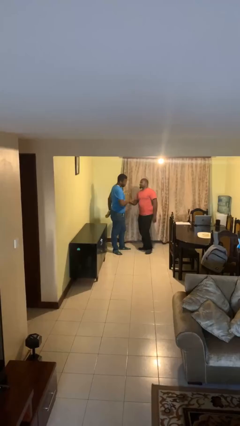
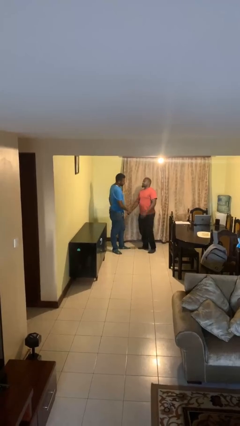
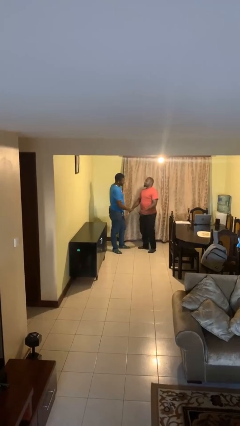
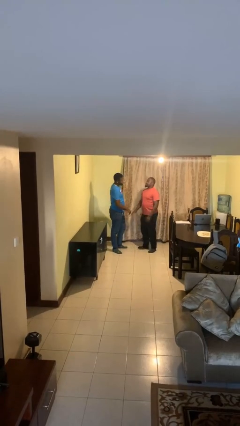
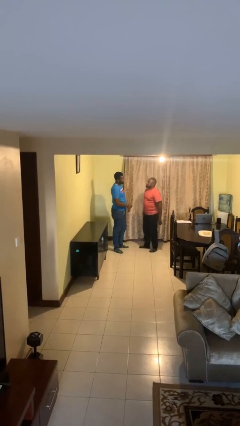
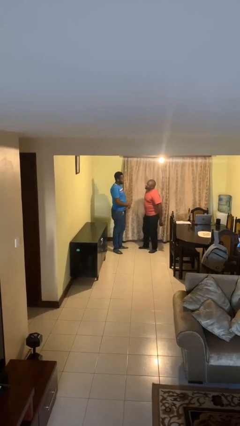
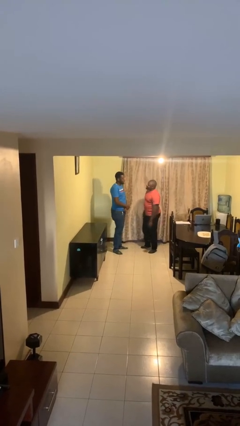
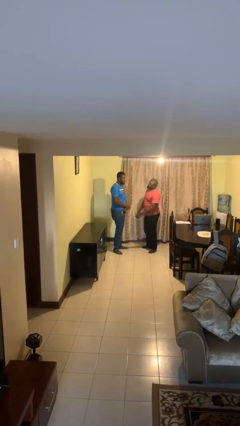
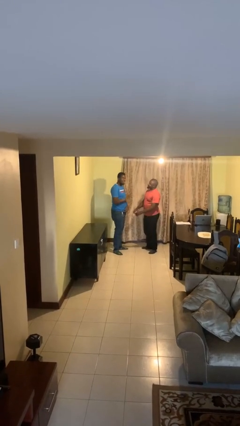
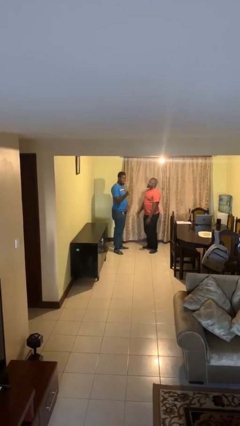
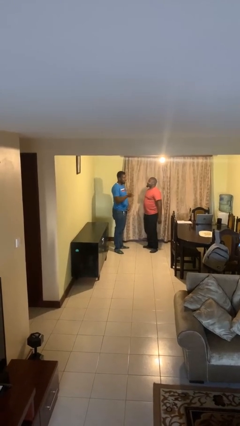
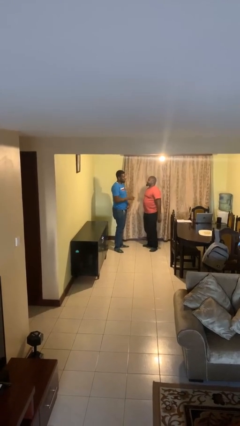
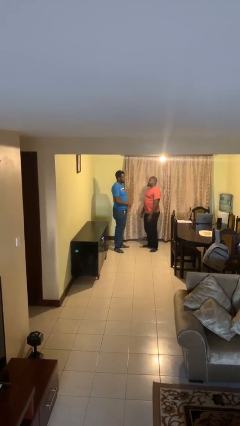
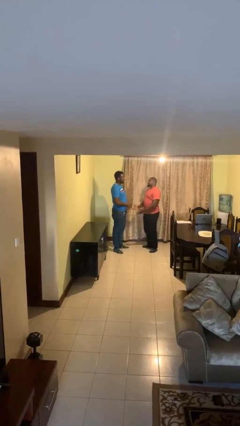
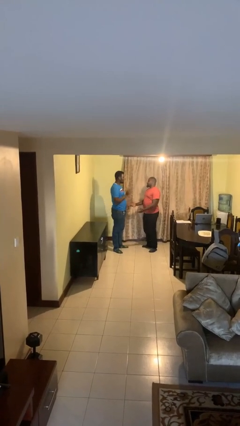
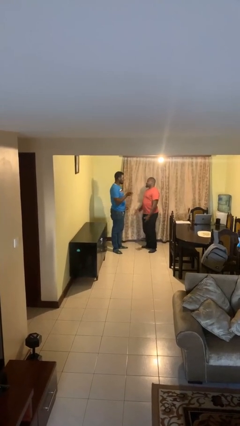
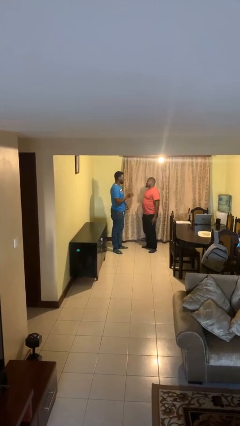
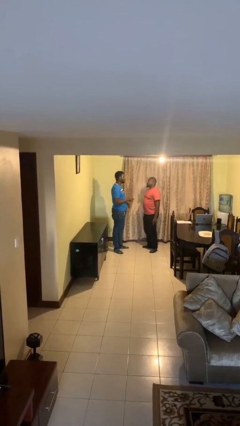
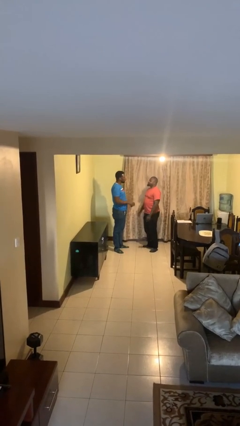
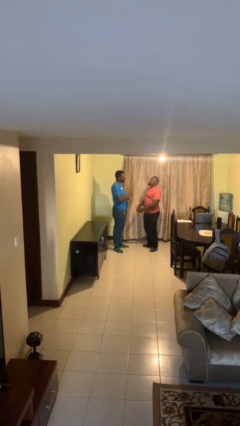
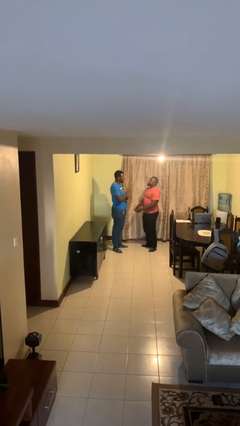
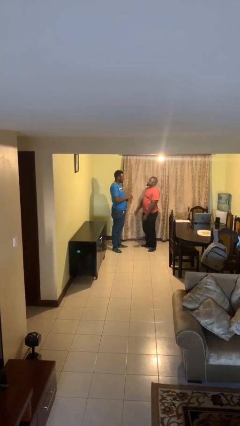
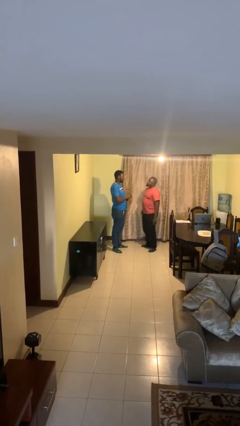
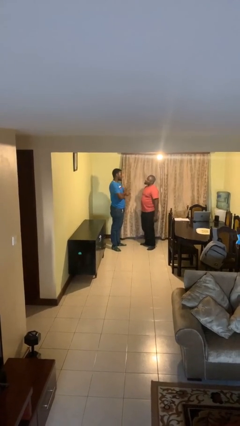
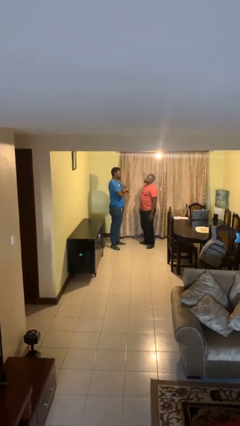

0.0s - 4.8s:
person talks to person

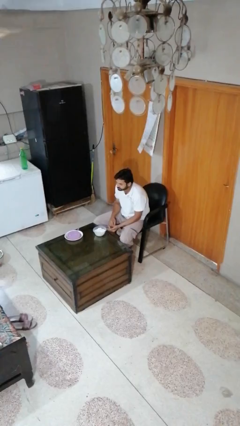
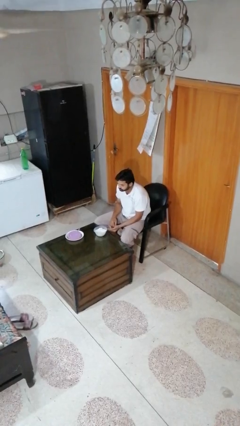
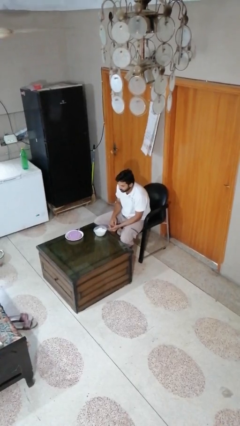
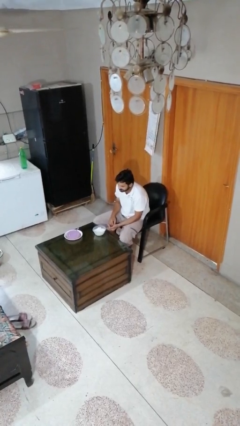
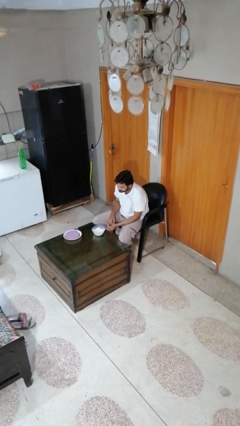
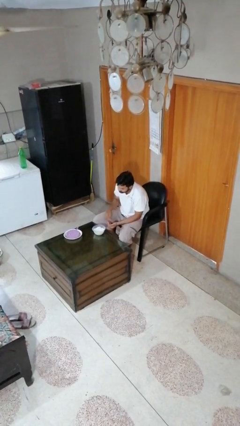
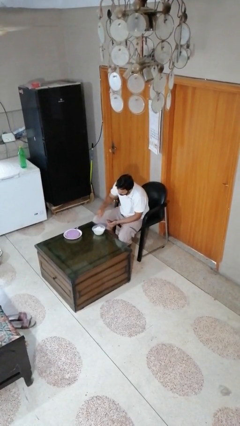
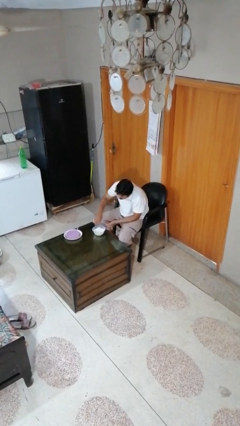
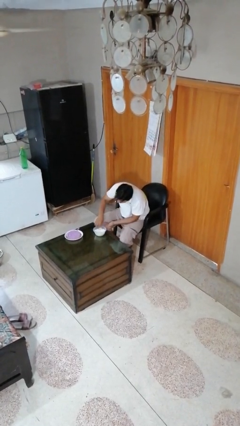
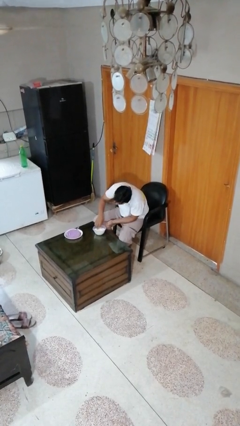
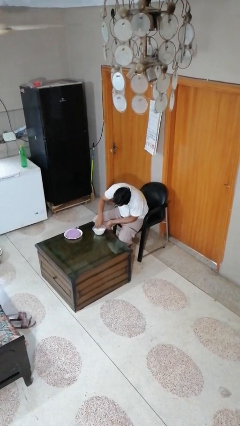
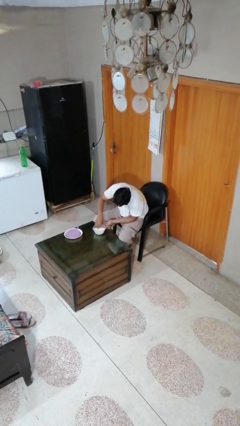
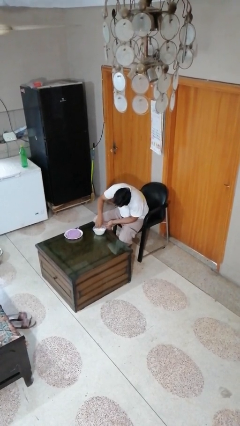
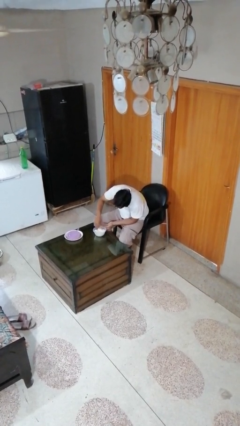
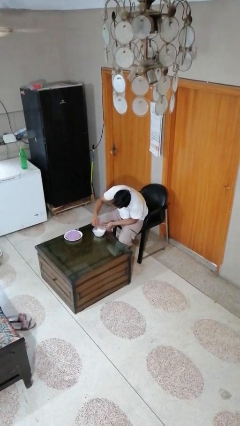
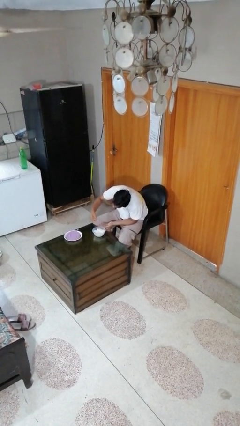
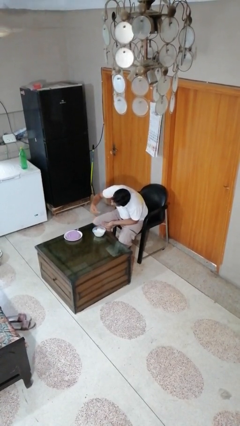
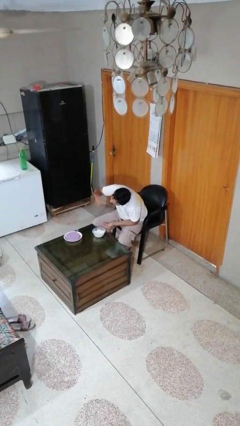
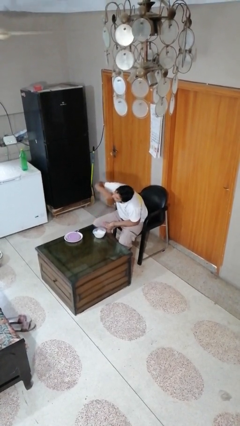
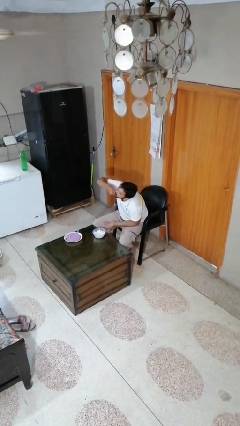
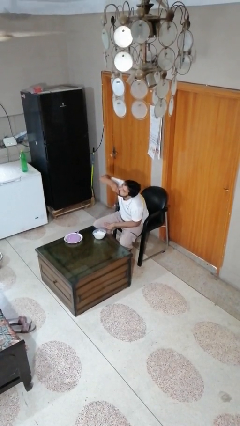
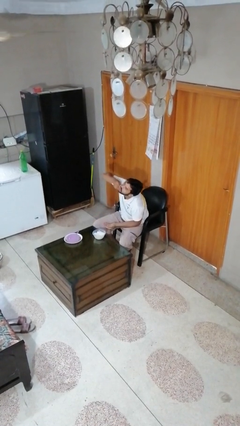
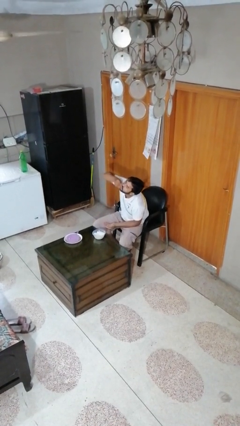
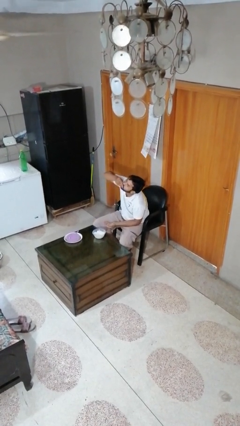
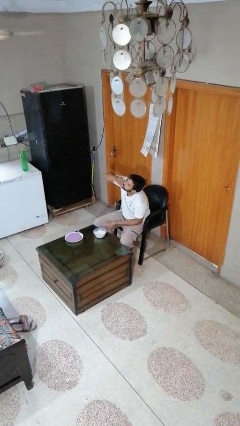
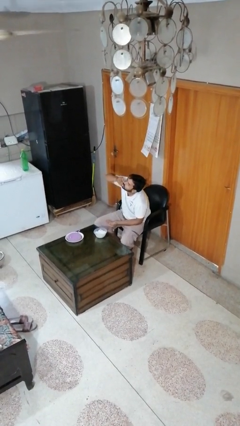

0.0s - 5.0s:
person eats with hands

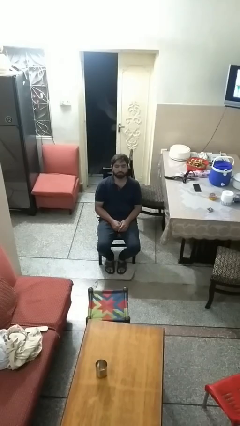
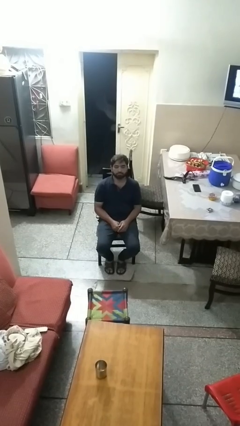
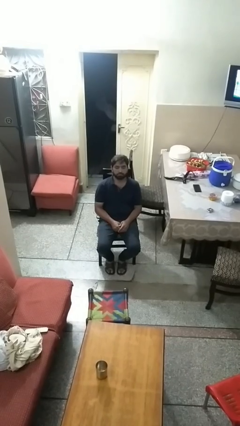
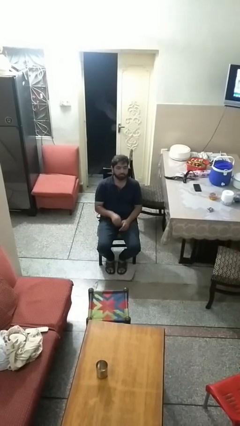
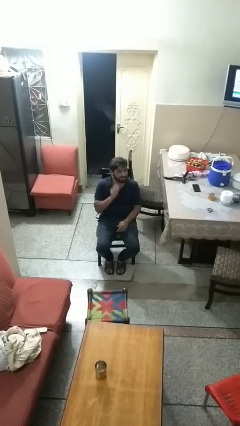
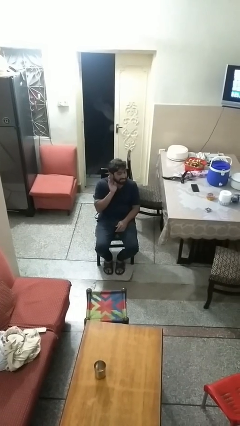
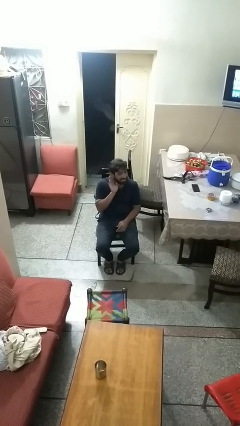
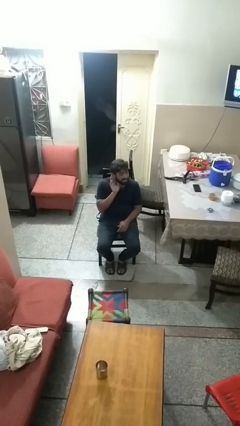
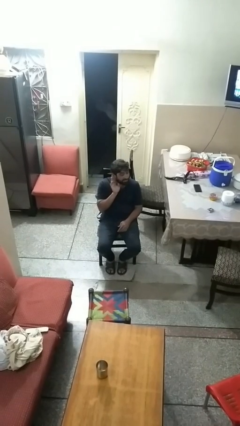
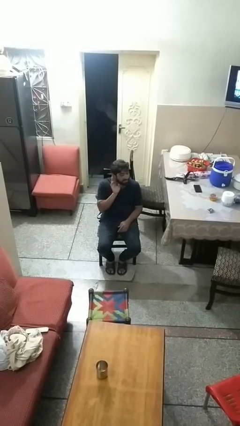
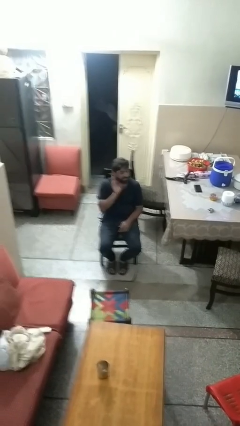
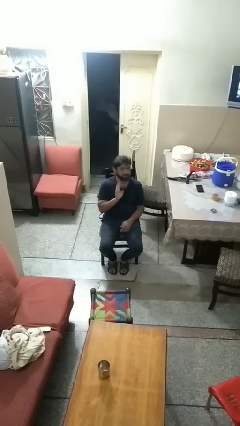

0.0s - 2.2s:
person gestures listen closely

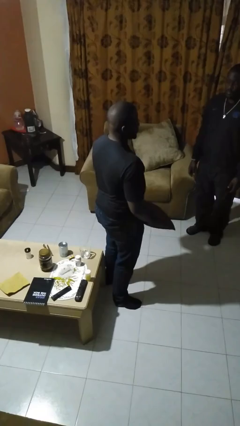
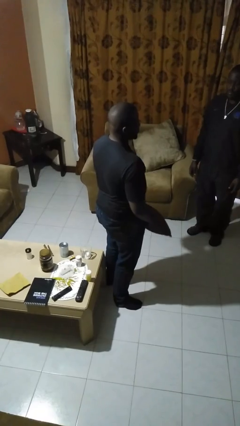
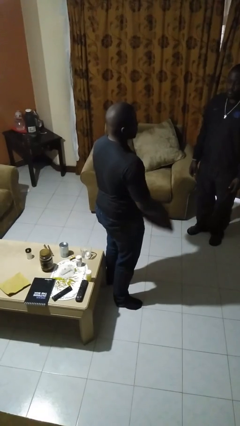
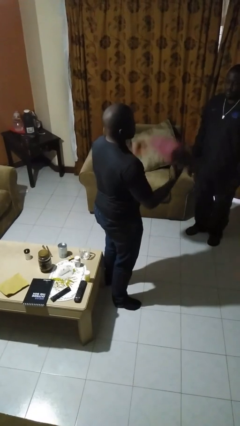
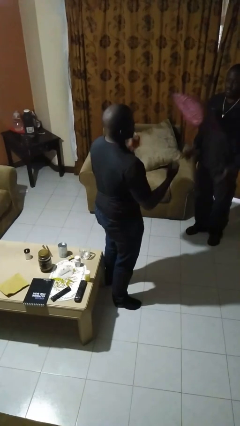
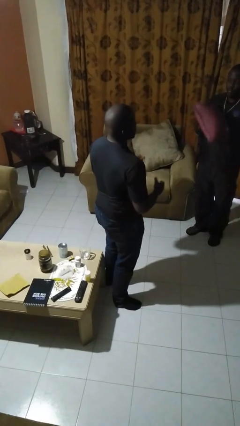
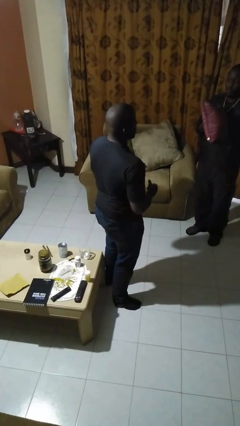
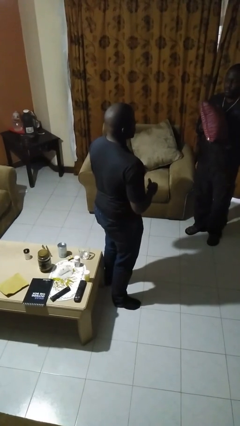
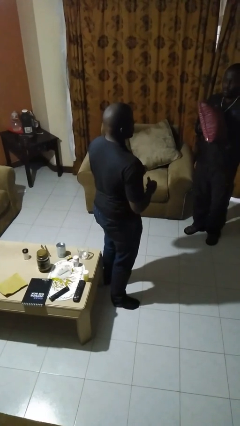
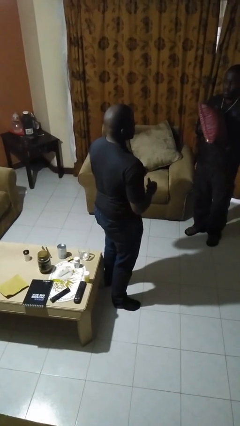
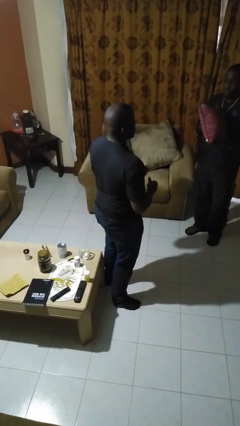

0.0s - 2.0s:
person throws object to person

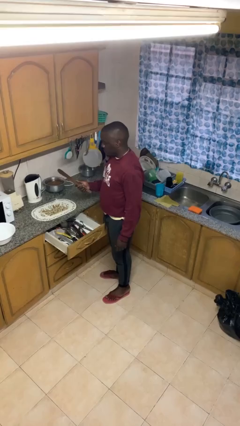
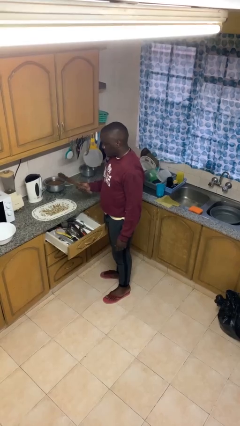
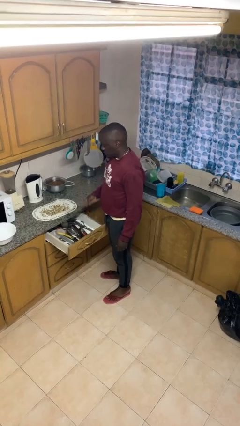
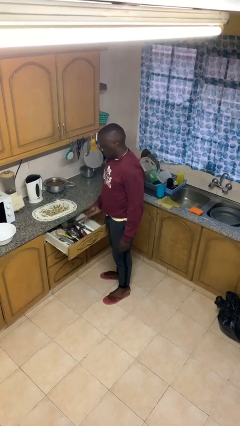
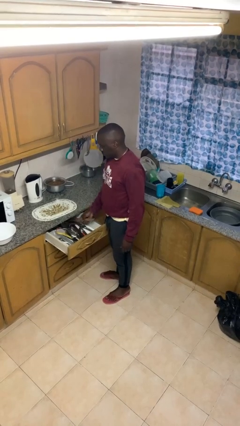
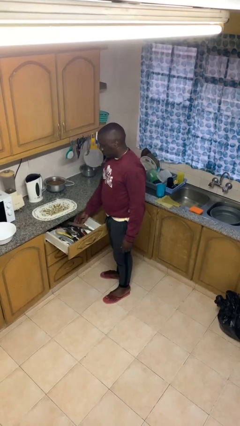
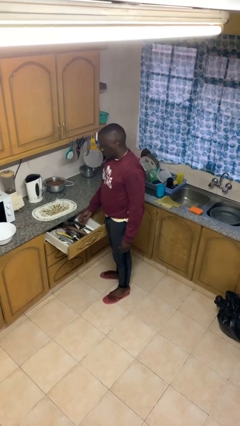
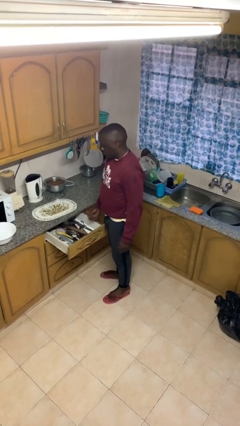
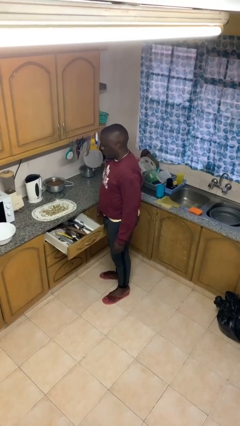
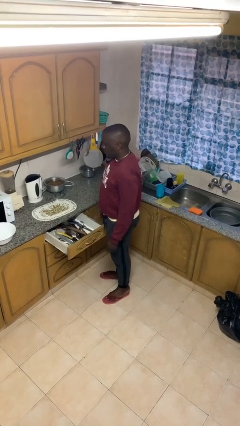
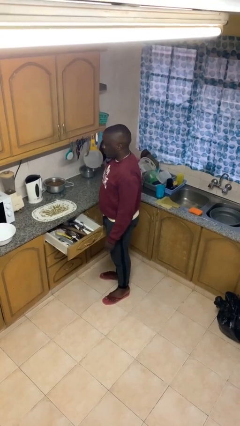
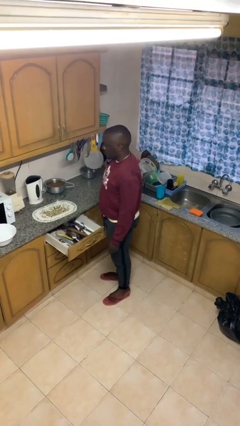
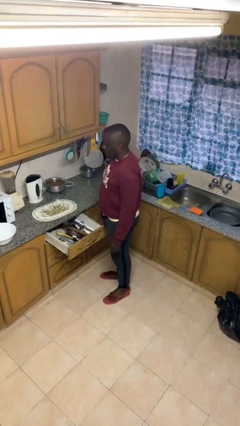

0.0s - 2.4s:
person puts object into kitchen drawer

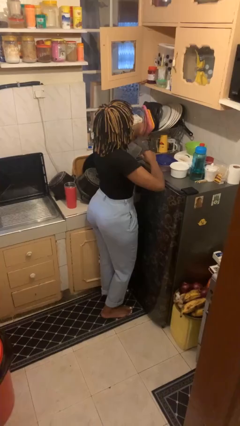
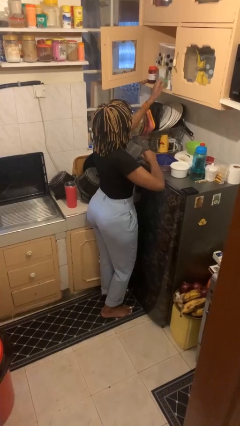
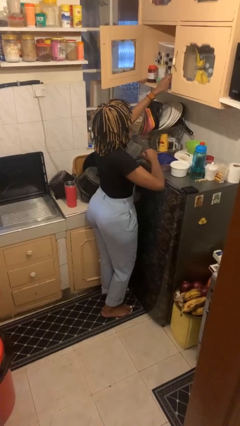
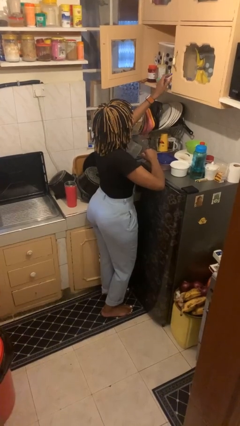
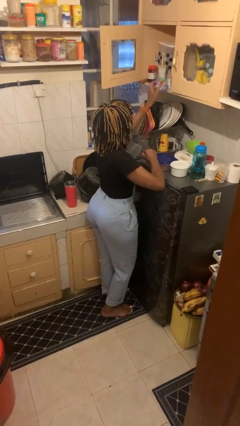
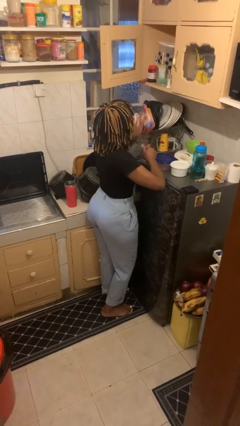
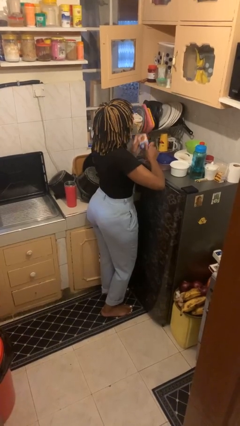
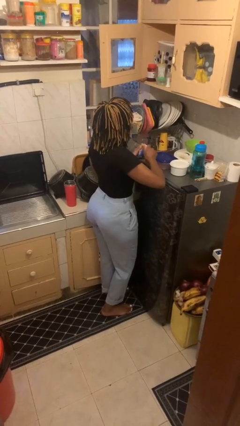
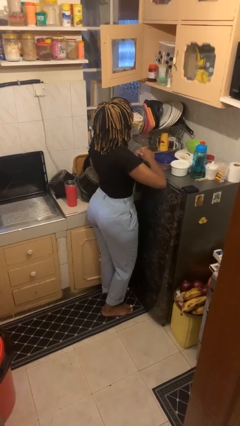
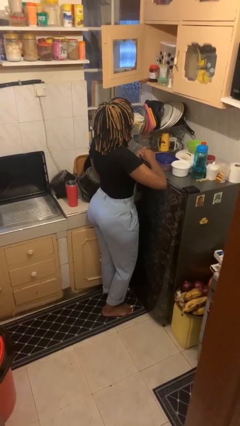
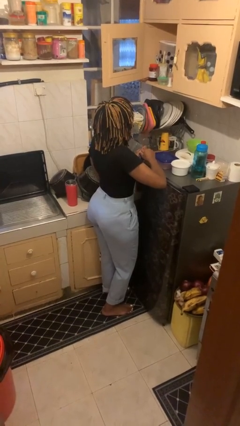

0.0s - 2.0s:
person takes object from cabinet
